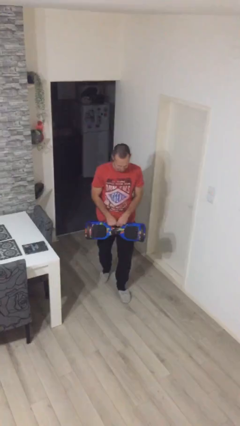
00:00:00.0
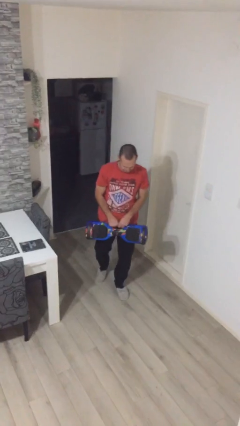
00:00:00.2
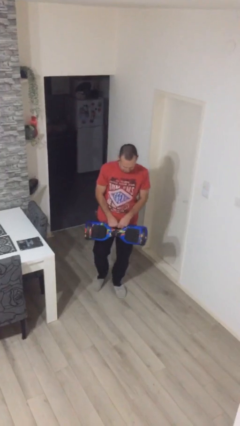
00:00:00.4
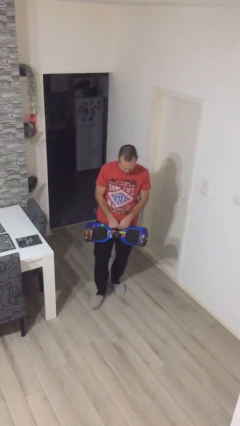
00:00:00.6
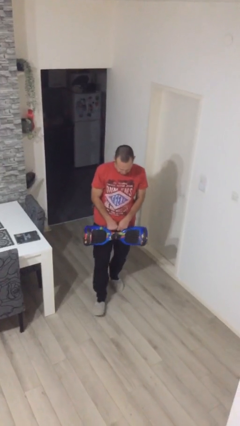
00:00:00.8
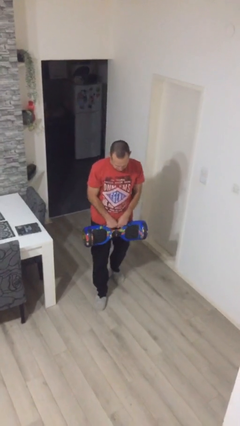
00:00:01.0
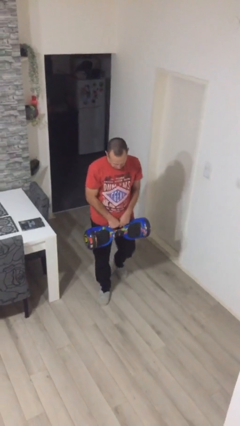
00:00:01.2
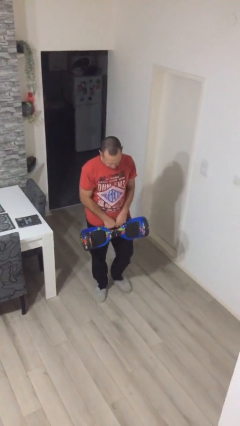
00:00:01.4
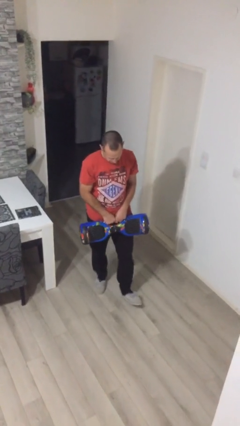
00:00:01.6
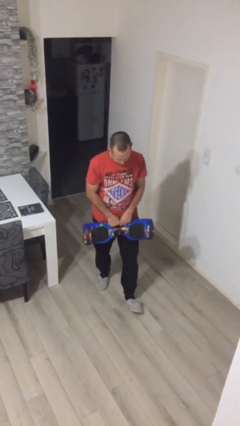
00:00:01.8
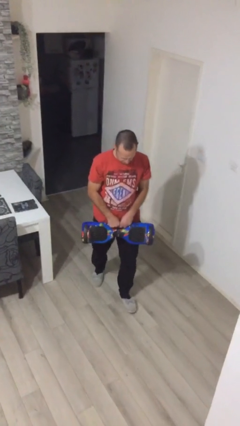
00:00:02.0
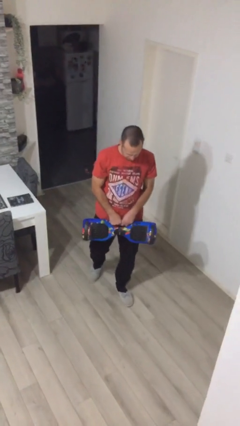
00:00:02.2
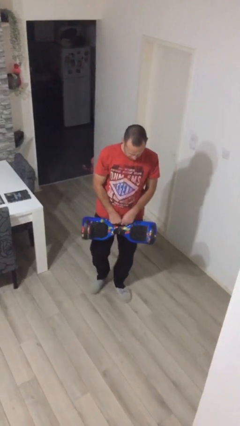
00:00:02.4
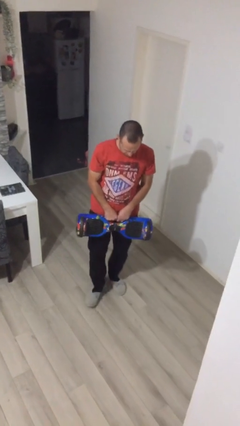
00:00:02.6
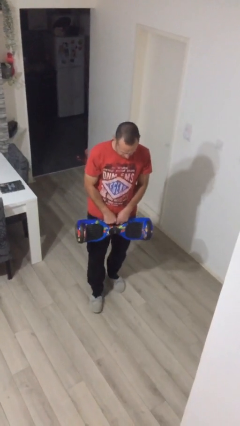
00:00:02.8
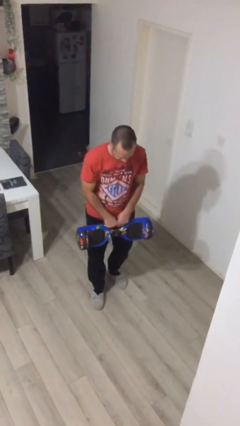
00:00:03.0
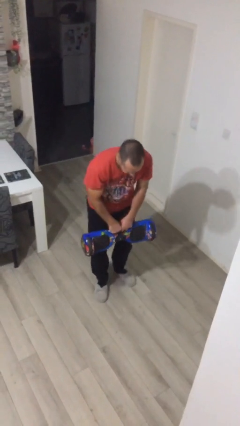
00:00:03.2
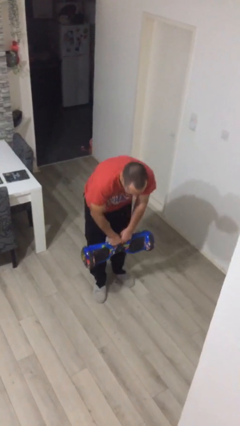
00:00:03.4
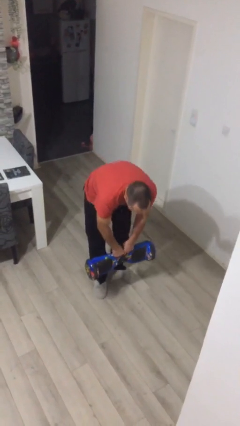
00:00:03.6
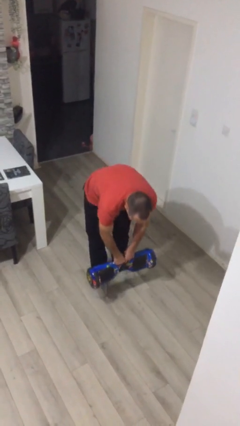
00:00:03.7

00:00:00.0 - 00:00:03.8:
person carries heavy object

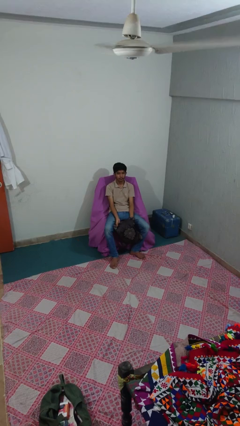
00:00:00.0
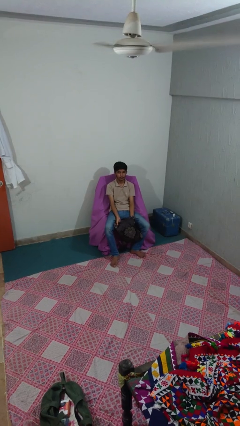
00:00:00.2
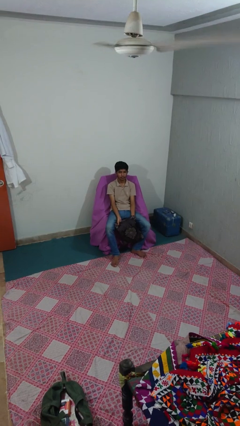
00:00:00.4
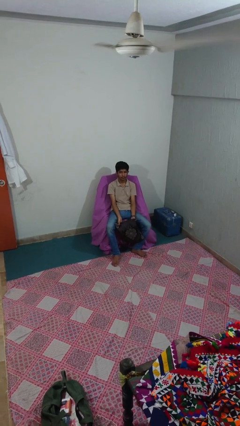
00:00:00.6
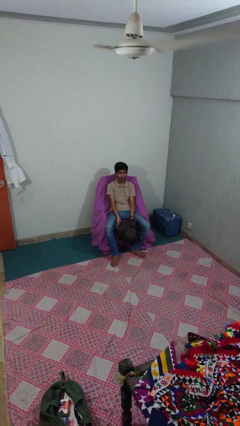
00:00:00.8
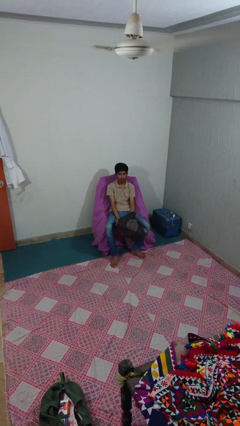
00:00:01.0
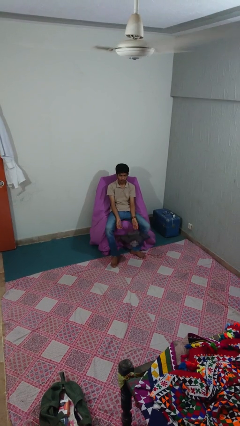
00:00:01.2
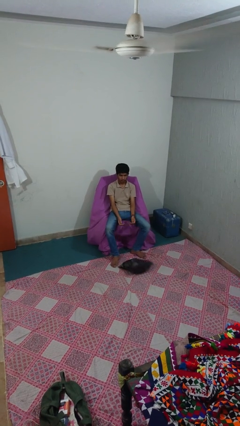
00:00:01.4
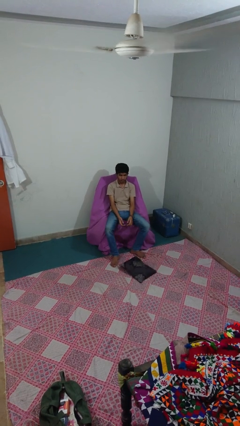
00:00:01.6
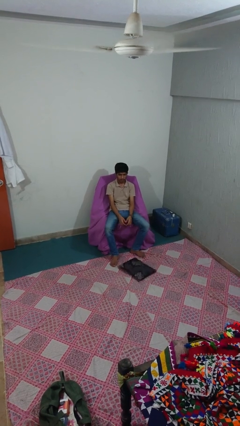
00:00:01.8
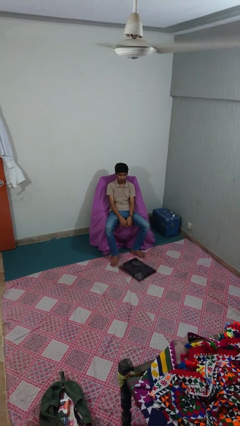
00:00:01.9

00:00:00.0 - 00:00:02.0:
person drops object

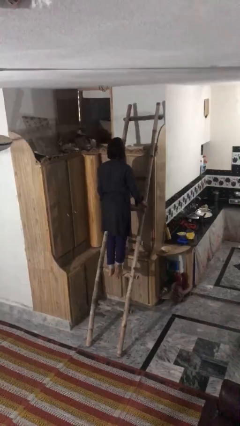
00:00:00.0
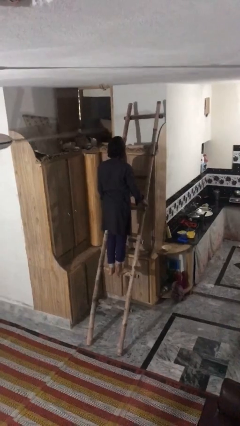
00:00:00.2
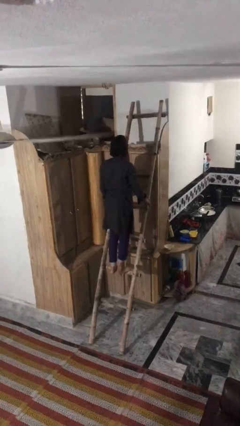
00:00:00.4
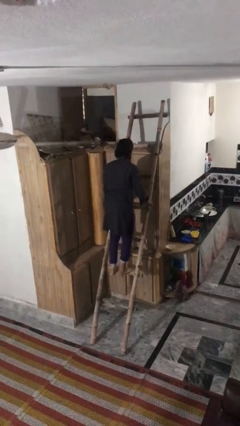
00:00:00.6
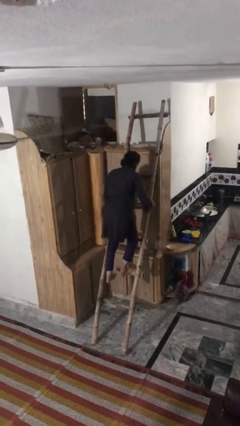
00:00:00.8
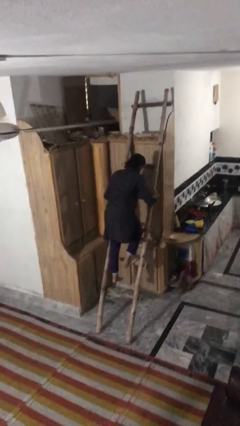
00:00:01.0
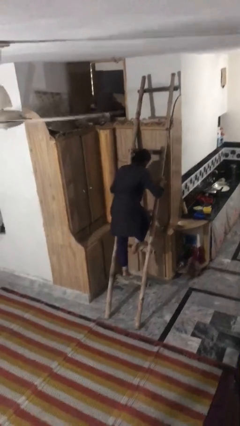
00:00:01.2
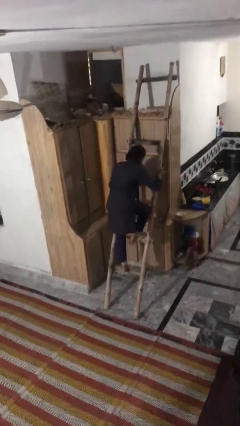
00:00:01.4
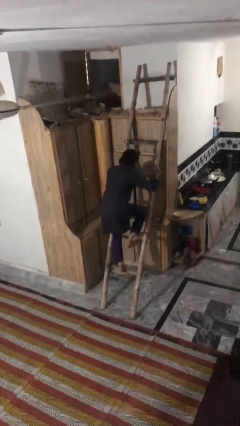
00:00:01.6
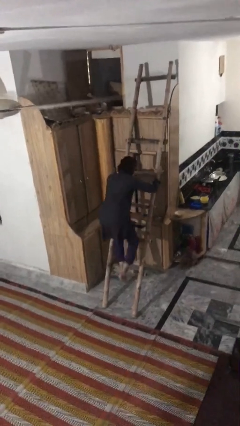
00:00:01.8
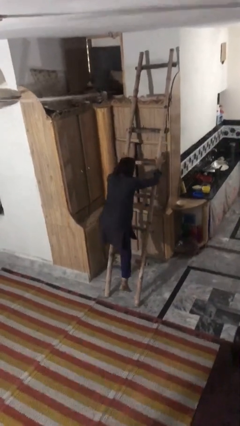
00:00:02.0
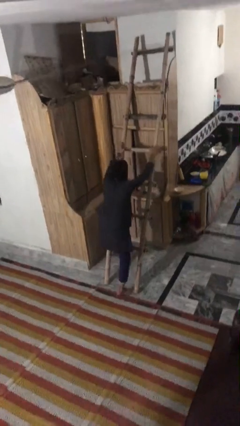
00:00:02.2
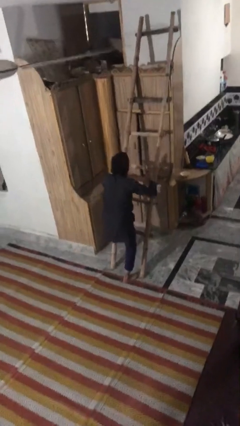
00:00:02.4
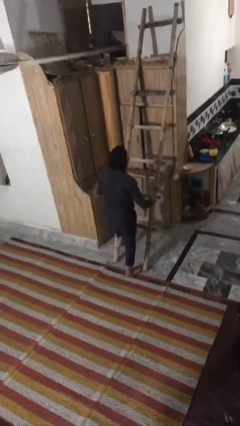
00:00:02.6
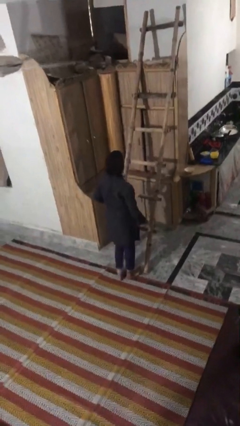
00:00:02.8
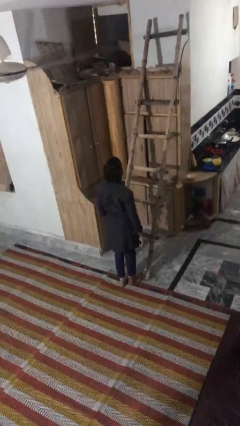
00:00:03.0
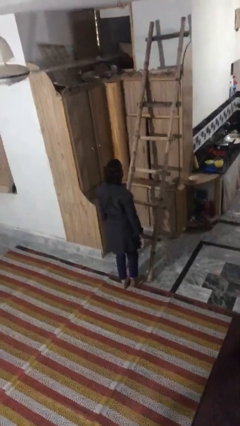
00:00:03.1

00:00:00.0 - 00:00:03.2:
person climbs down ladder

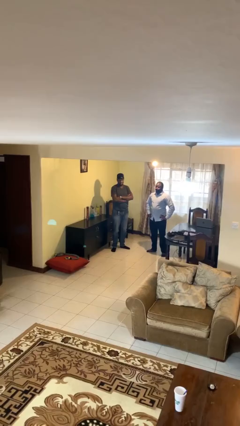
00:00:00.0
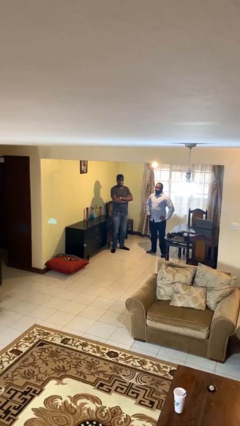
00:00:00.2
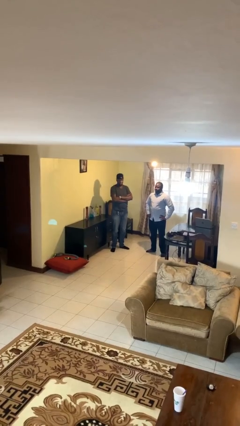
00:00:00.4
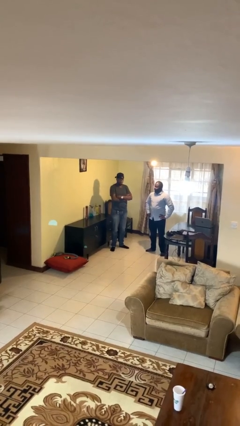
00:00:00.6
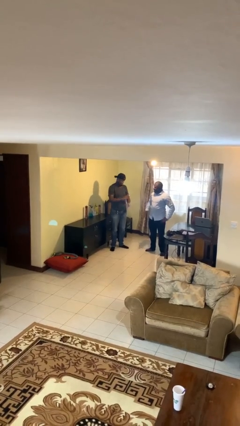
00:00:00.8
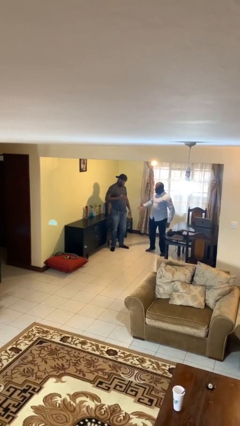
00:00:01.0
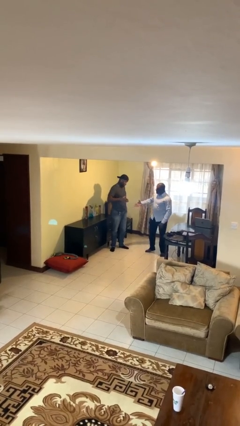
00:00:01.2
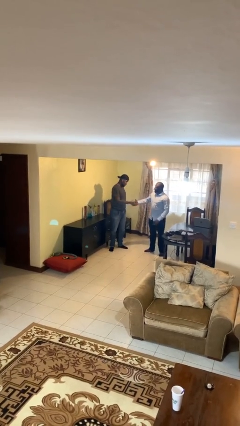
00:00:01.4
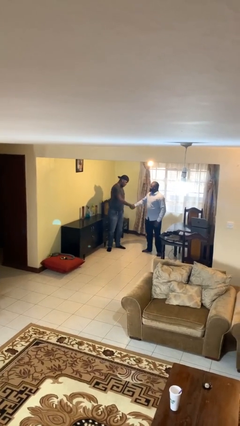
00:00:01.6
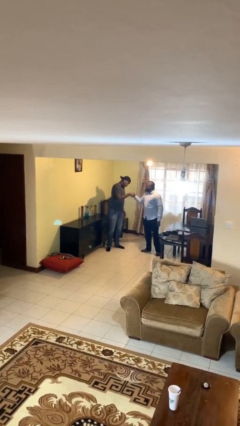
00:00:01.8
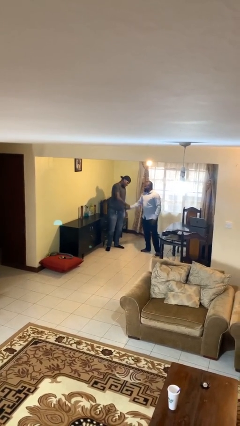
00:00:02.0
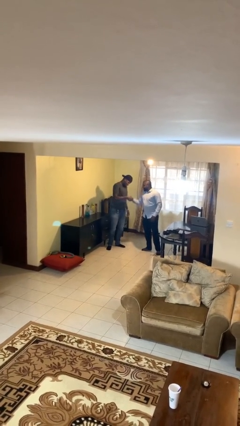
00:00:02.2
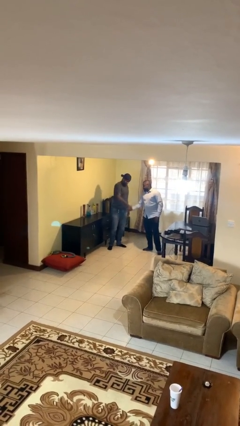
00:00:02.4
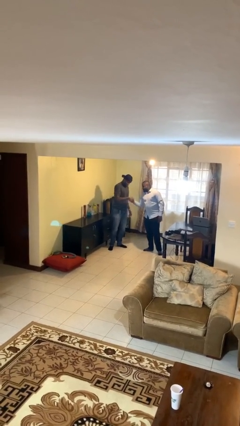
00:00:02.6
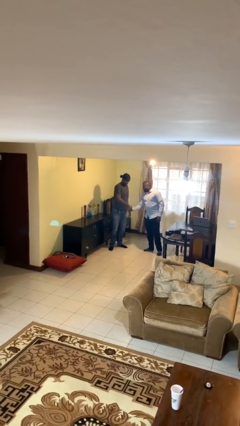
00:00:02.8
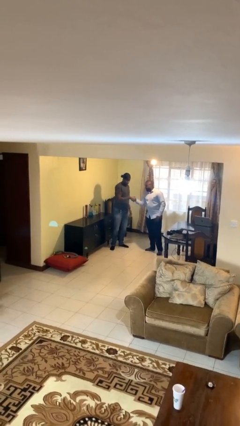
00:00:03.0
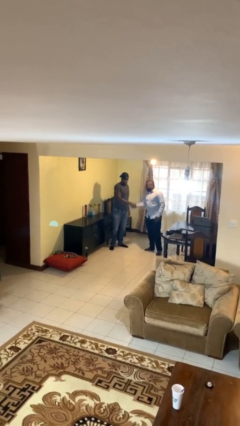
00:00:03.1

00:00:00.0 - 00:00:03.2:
person shakes hand

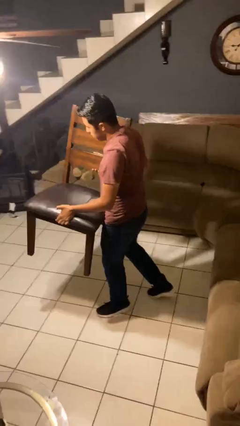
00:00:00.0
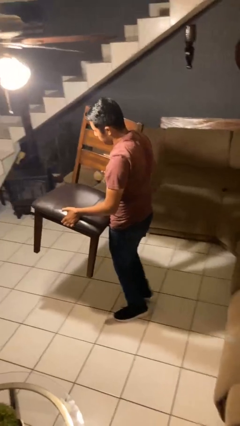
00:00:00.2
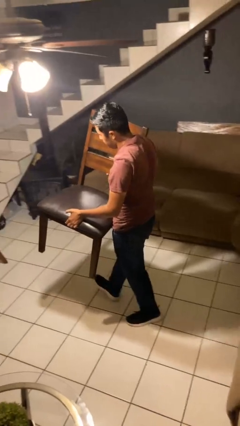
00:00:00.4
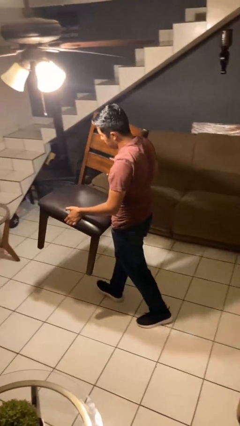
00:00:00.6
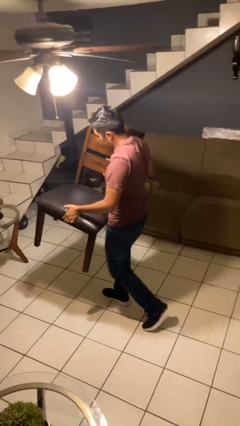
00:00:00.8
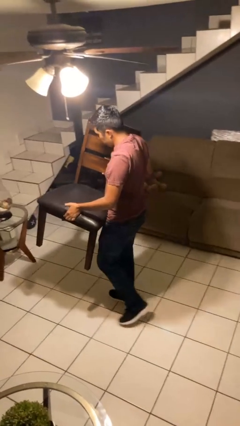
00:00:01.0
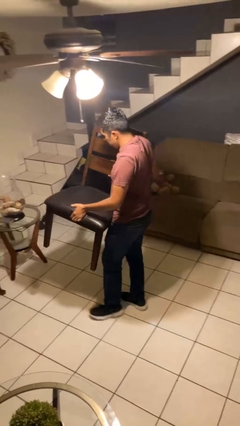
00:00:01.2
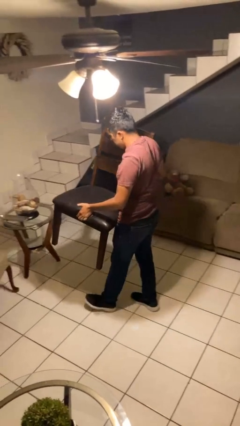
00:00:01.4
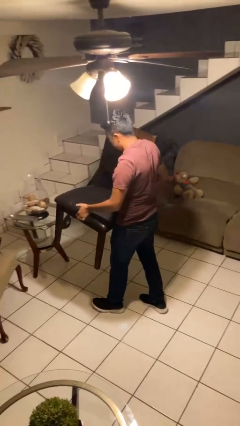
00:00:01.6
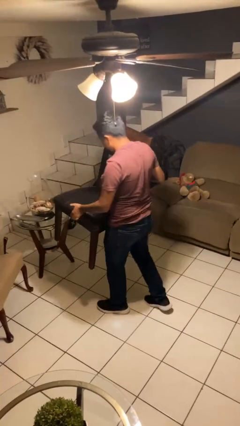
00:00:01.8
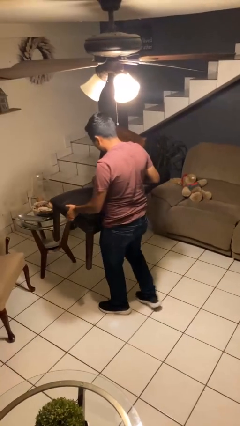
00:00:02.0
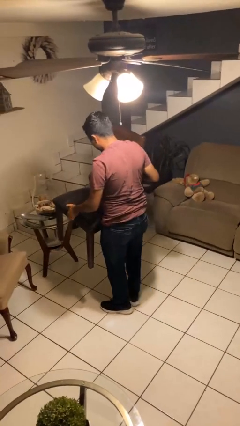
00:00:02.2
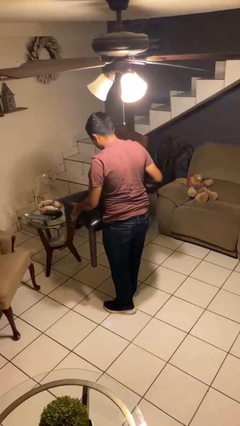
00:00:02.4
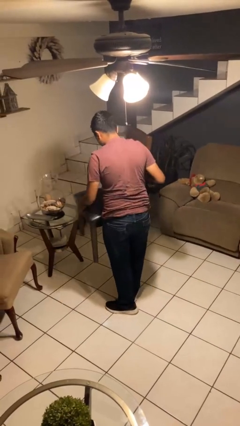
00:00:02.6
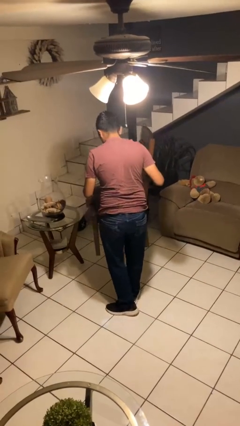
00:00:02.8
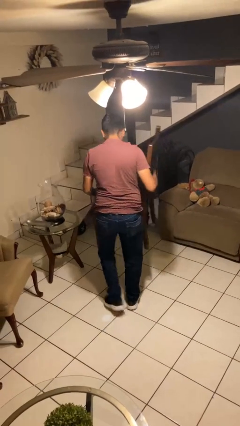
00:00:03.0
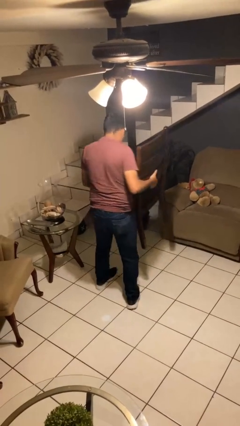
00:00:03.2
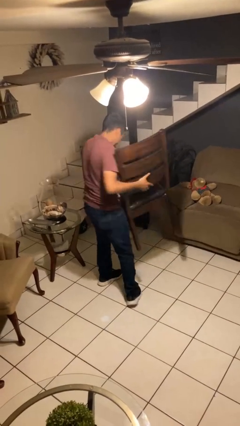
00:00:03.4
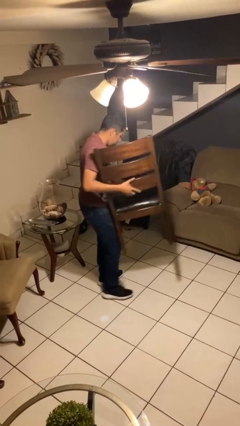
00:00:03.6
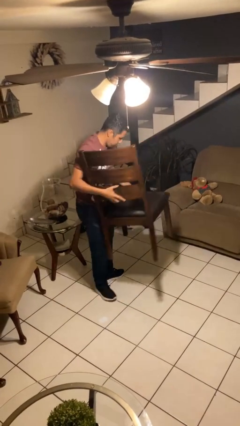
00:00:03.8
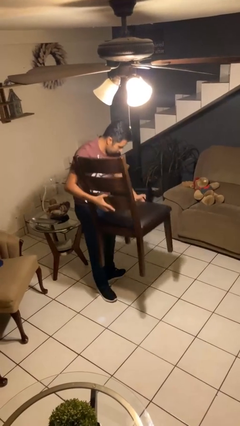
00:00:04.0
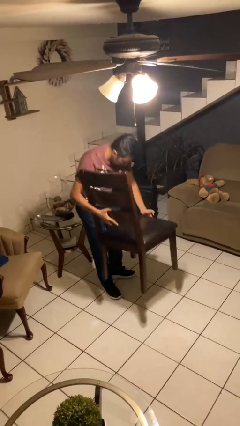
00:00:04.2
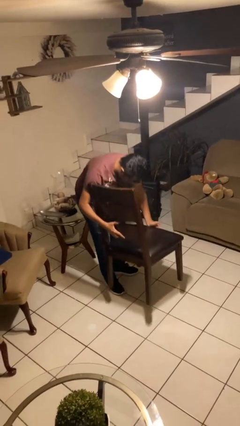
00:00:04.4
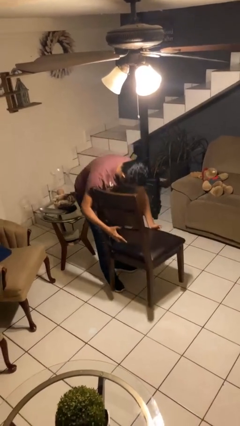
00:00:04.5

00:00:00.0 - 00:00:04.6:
person carries furniture

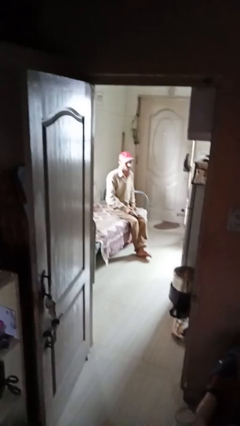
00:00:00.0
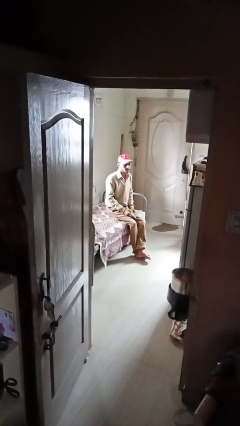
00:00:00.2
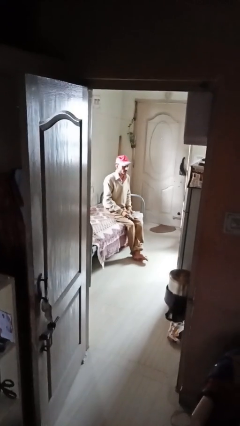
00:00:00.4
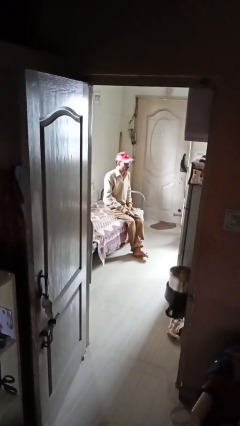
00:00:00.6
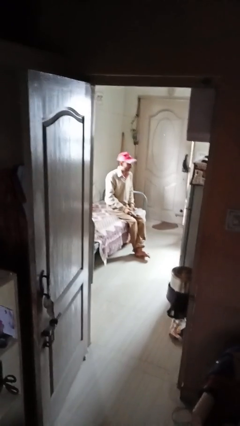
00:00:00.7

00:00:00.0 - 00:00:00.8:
person wipes mouth with napkin
